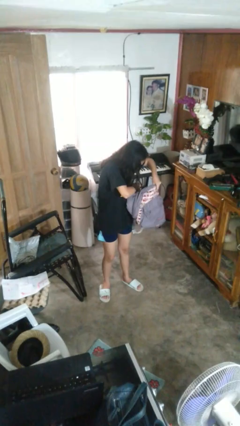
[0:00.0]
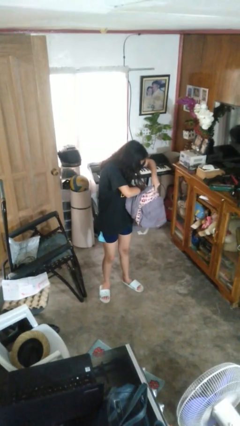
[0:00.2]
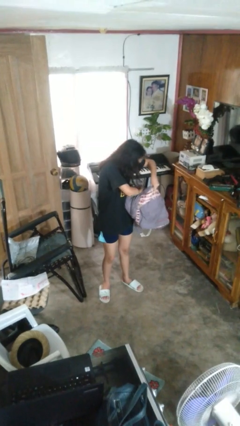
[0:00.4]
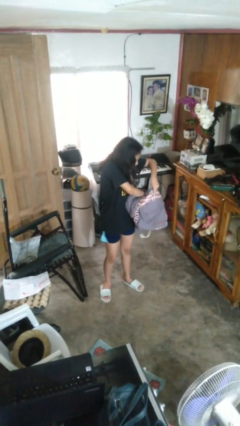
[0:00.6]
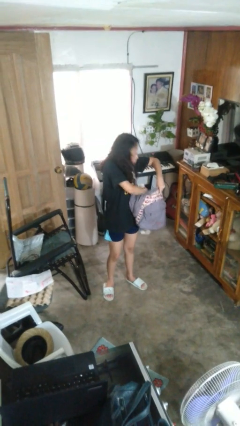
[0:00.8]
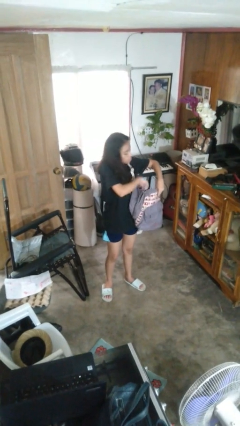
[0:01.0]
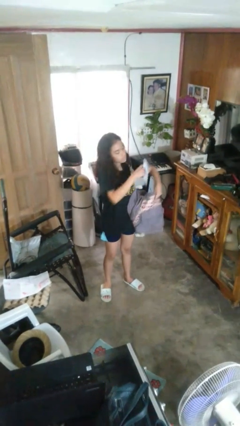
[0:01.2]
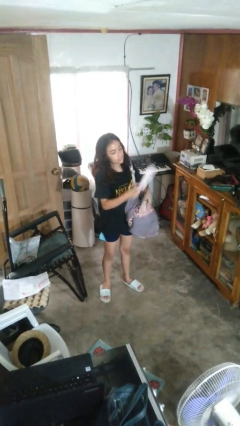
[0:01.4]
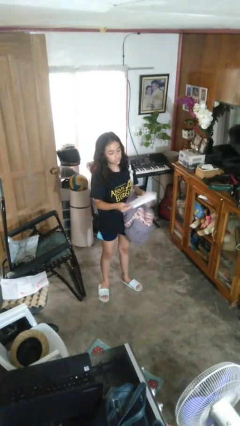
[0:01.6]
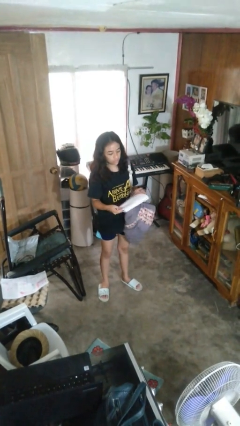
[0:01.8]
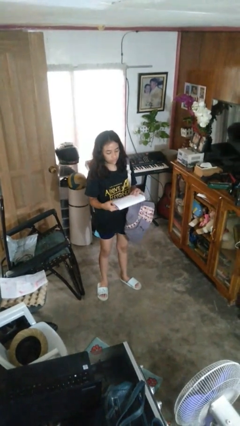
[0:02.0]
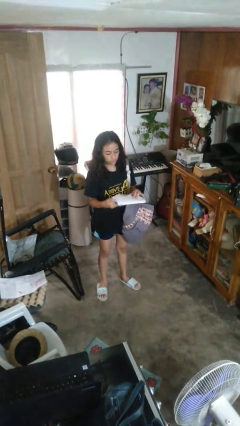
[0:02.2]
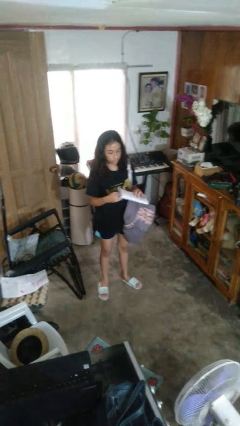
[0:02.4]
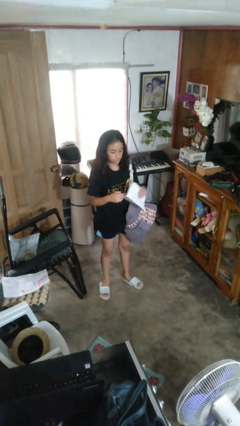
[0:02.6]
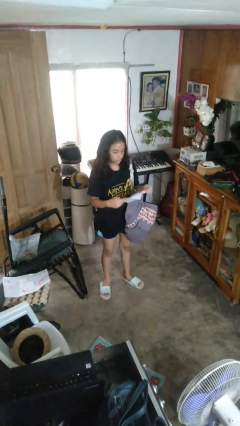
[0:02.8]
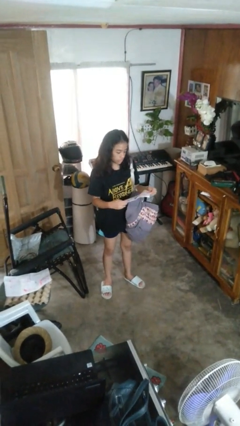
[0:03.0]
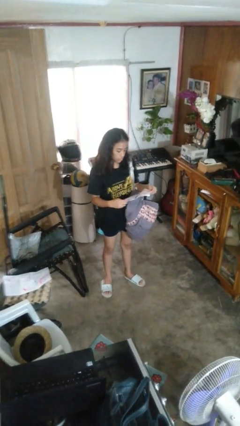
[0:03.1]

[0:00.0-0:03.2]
person takes object from backpack

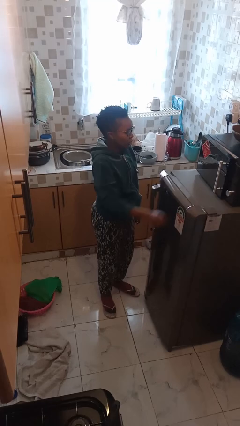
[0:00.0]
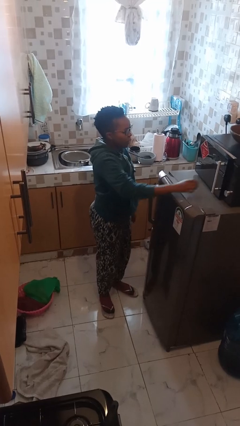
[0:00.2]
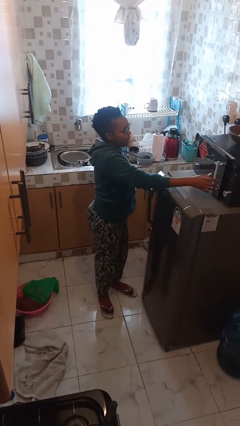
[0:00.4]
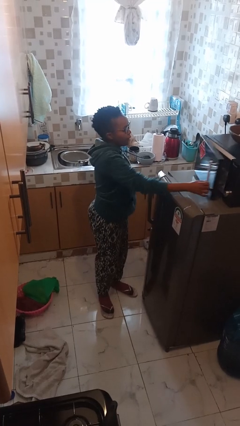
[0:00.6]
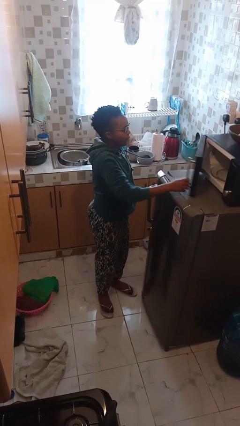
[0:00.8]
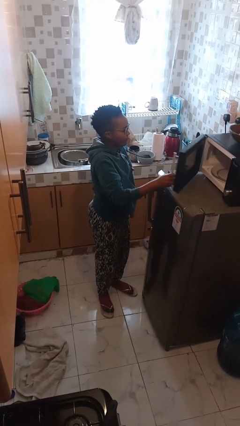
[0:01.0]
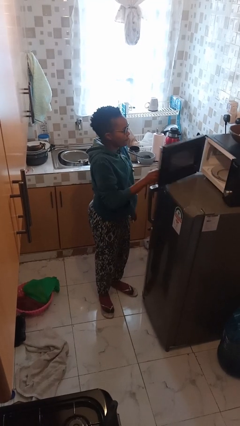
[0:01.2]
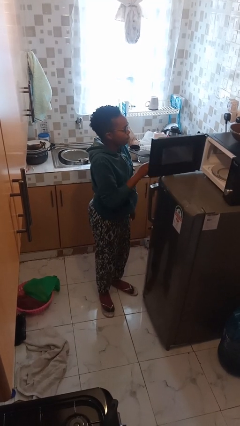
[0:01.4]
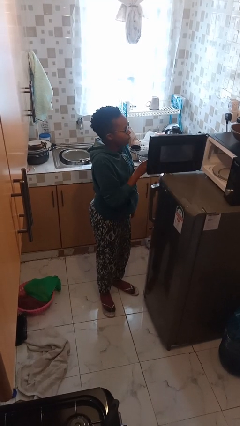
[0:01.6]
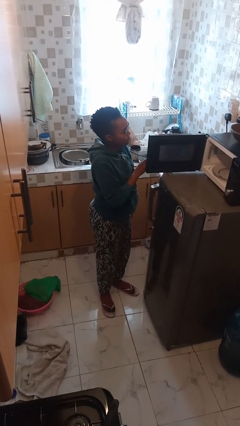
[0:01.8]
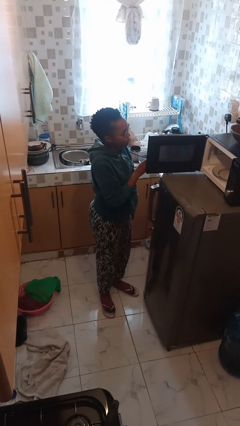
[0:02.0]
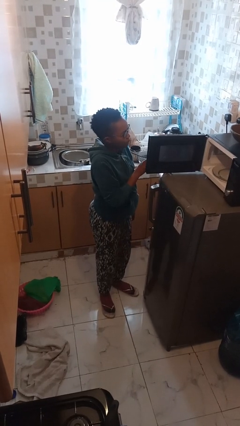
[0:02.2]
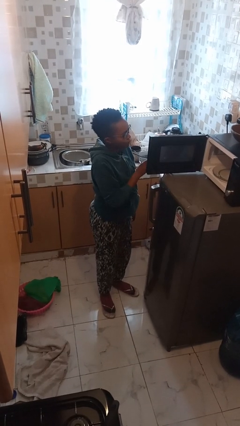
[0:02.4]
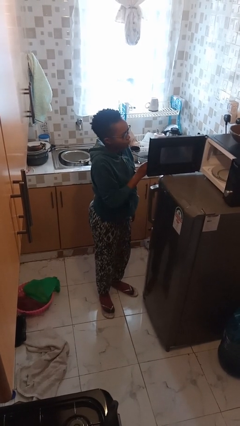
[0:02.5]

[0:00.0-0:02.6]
person opens microwave

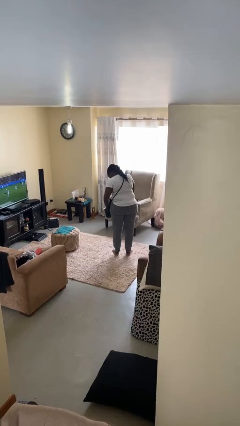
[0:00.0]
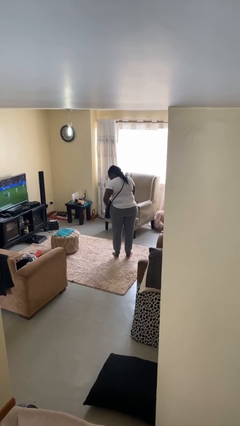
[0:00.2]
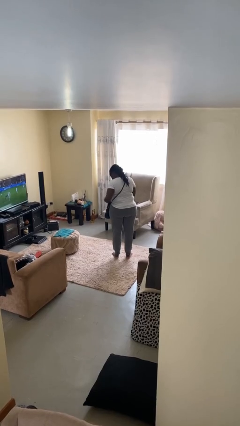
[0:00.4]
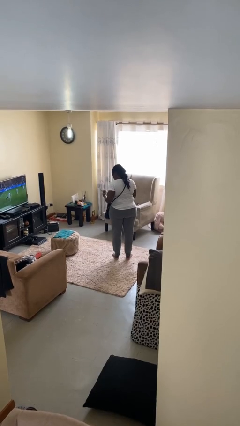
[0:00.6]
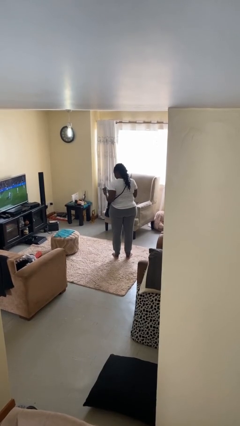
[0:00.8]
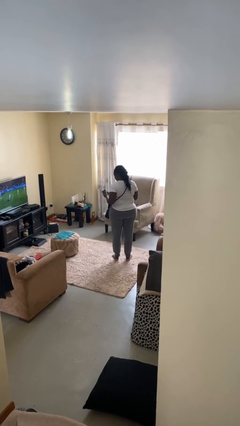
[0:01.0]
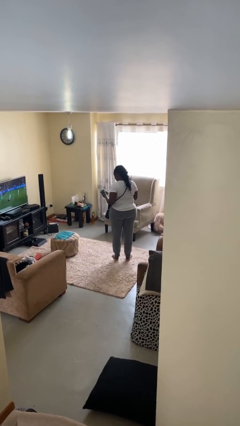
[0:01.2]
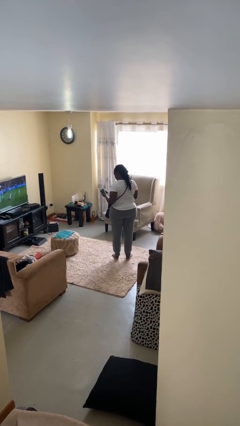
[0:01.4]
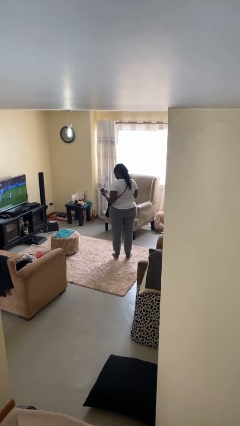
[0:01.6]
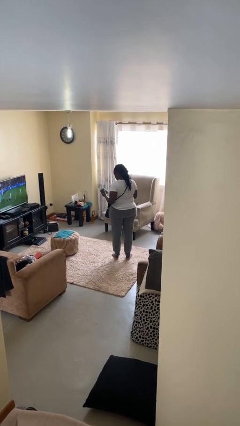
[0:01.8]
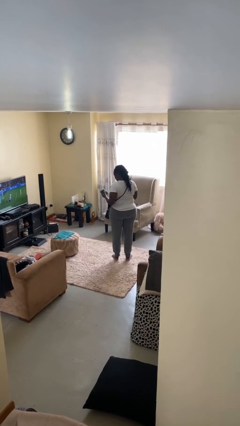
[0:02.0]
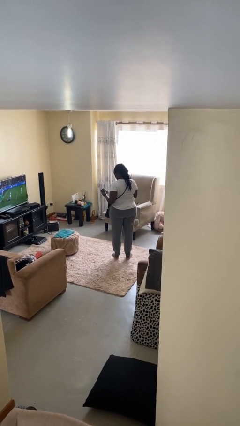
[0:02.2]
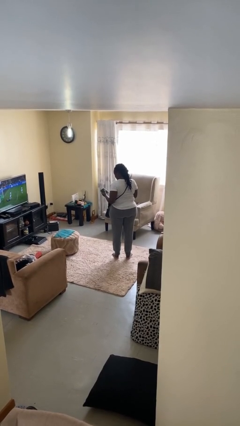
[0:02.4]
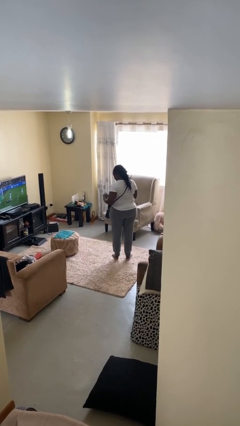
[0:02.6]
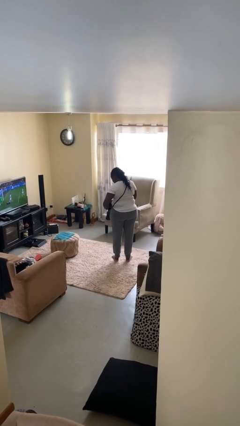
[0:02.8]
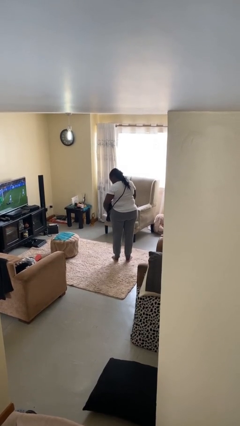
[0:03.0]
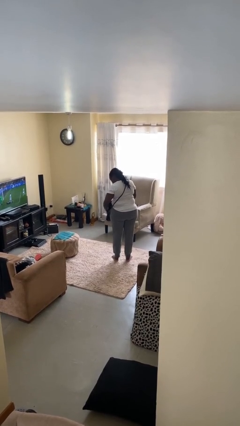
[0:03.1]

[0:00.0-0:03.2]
person takes object from purse

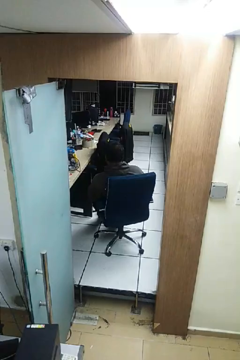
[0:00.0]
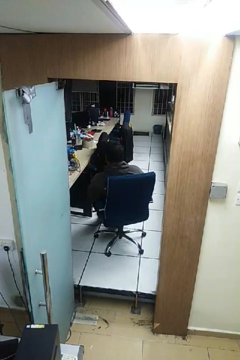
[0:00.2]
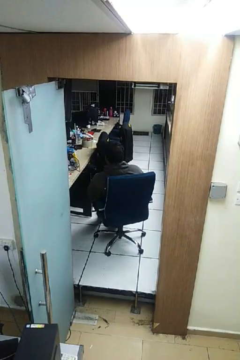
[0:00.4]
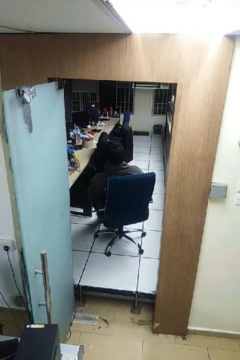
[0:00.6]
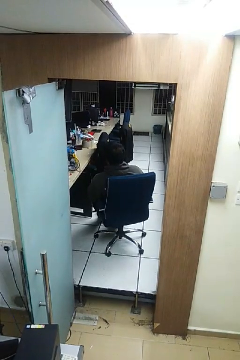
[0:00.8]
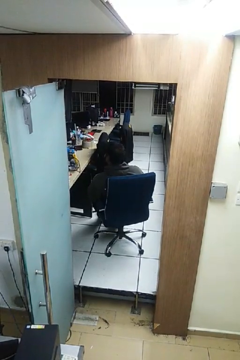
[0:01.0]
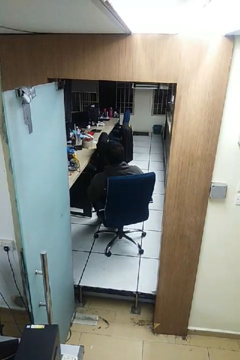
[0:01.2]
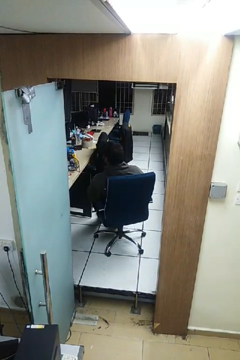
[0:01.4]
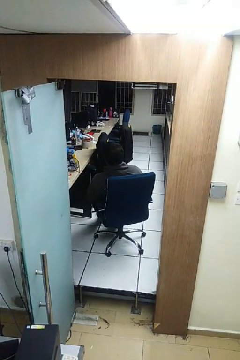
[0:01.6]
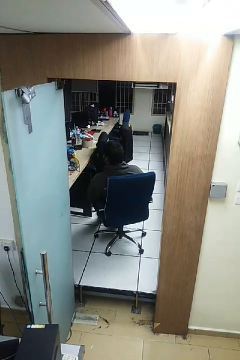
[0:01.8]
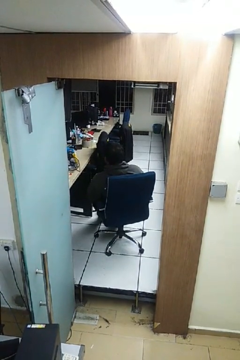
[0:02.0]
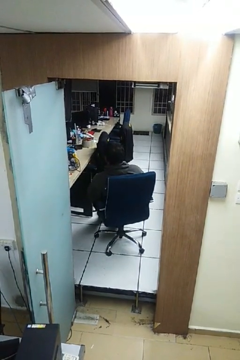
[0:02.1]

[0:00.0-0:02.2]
person shakes head

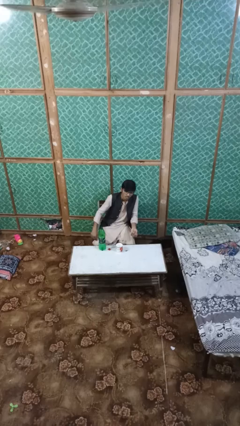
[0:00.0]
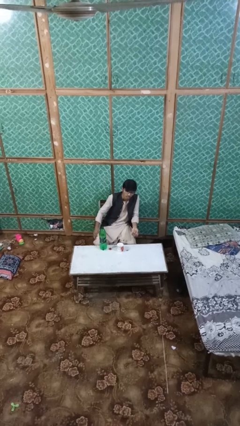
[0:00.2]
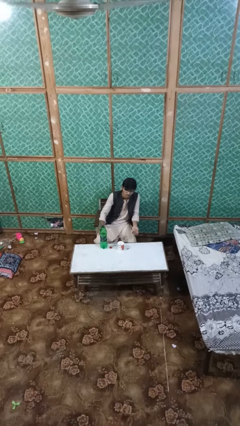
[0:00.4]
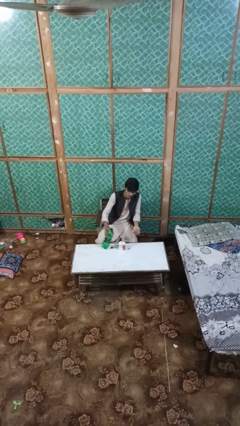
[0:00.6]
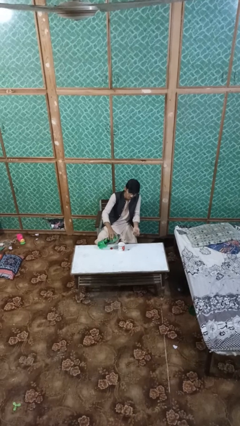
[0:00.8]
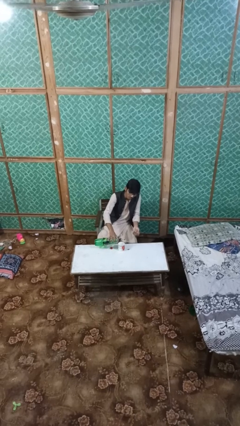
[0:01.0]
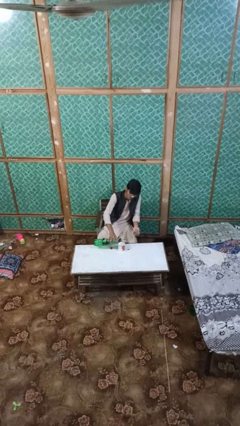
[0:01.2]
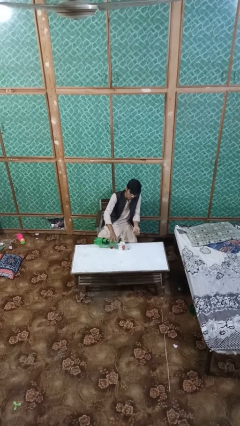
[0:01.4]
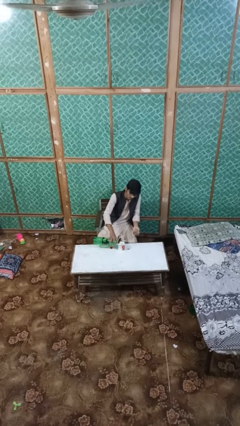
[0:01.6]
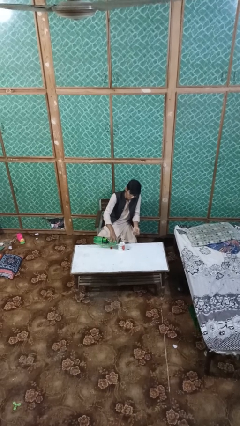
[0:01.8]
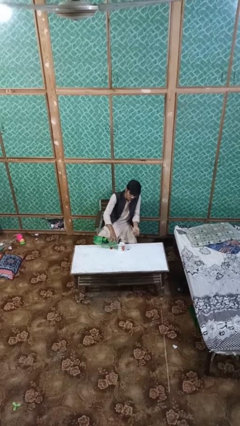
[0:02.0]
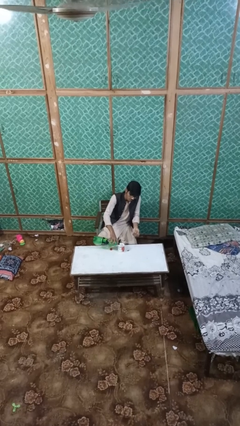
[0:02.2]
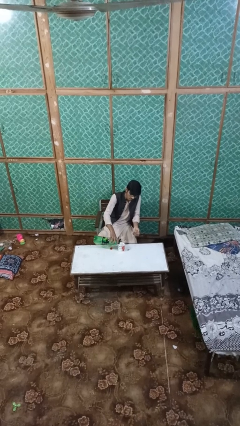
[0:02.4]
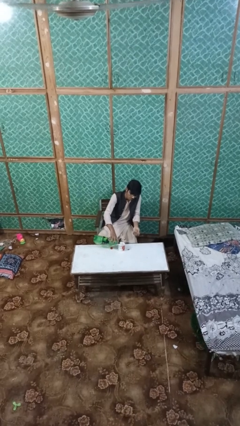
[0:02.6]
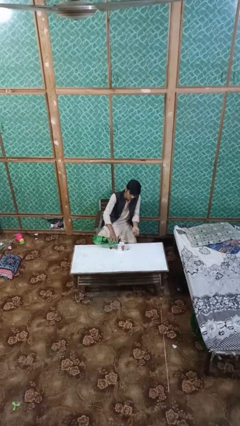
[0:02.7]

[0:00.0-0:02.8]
person pours liquid into cup

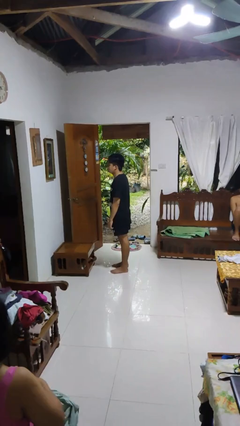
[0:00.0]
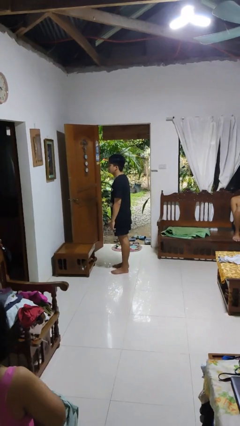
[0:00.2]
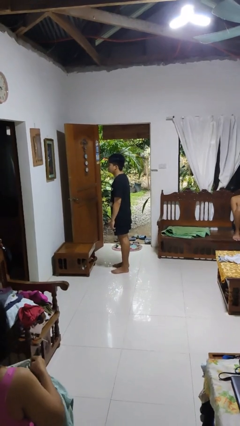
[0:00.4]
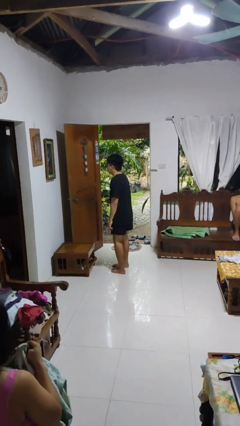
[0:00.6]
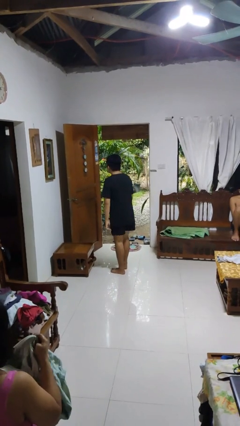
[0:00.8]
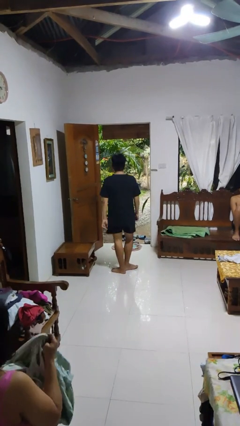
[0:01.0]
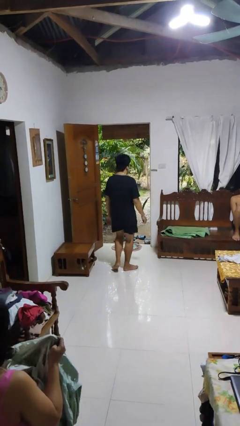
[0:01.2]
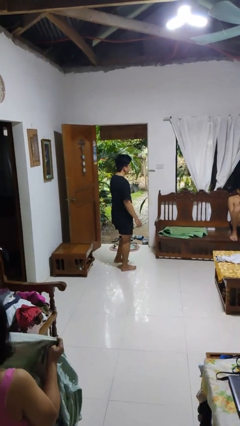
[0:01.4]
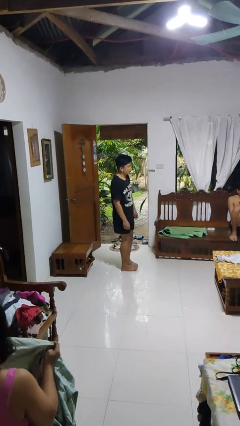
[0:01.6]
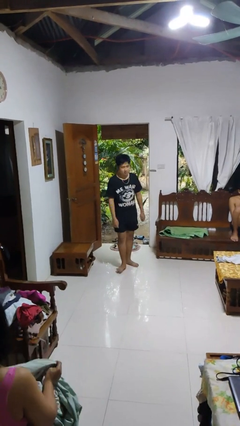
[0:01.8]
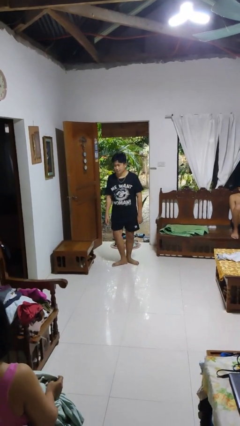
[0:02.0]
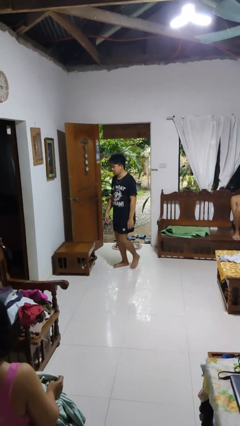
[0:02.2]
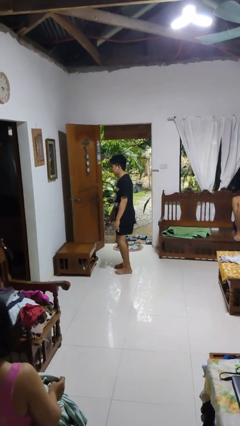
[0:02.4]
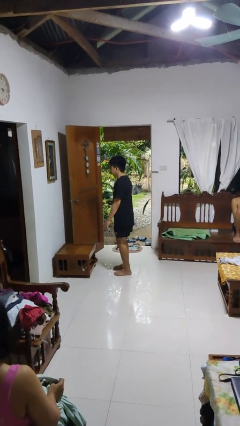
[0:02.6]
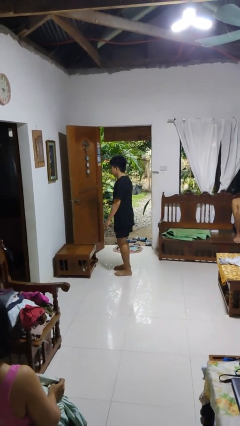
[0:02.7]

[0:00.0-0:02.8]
person twirls

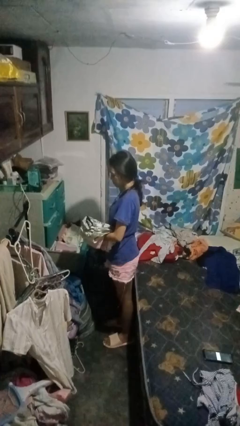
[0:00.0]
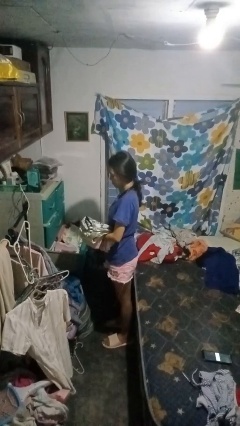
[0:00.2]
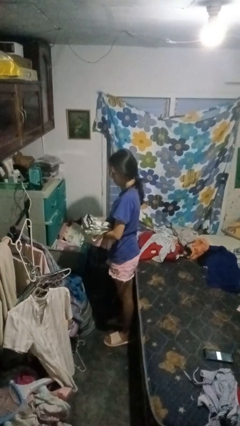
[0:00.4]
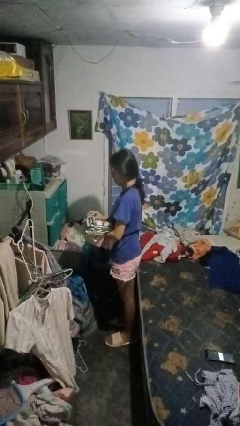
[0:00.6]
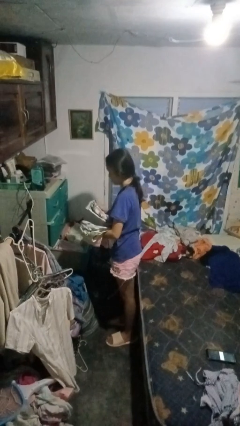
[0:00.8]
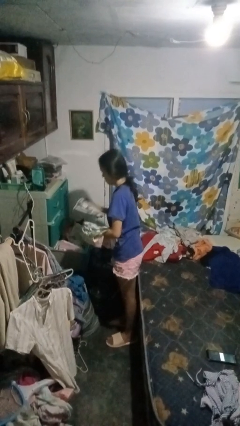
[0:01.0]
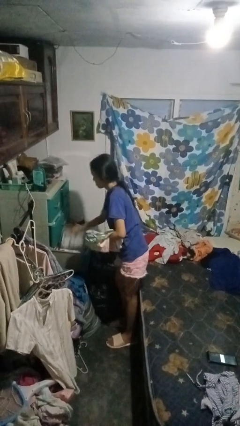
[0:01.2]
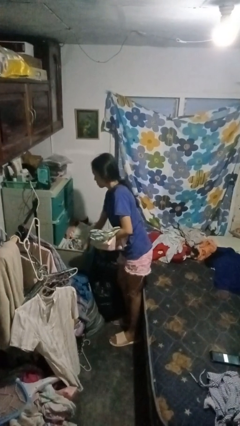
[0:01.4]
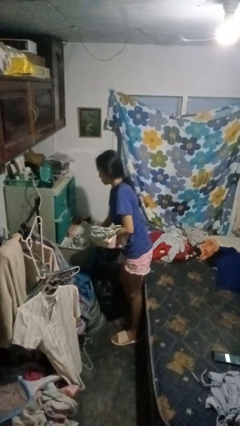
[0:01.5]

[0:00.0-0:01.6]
person puts clothes into dresser
